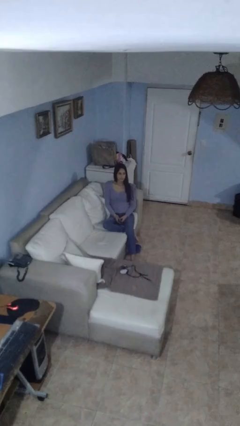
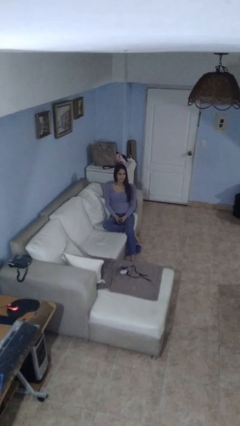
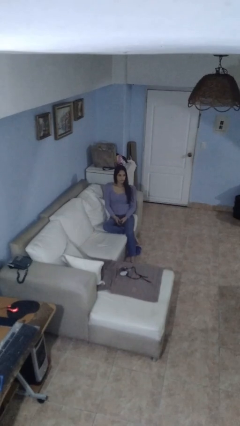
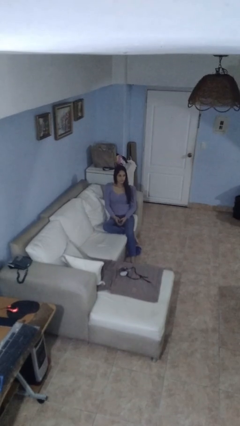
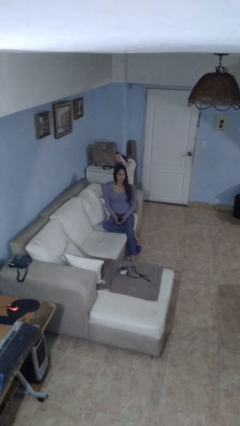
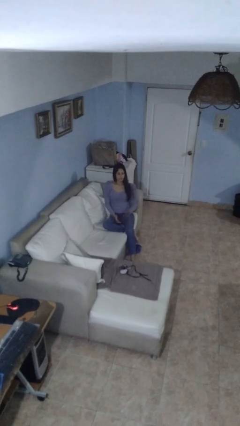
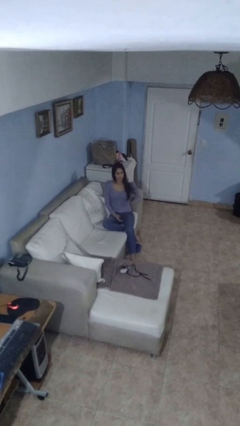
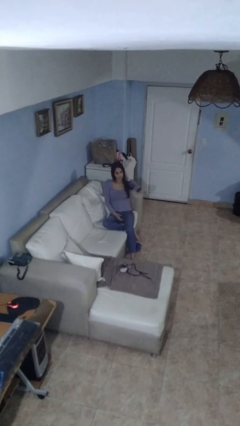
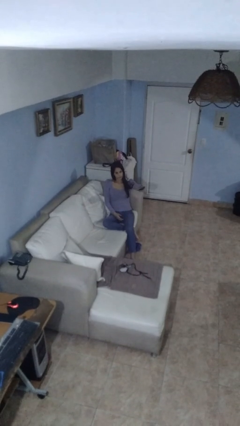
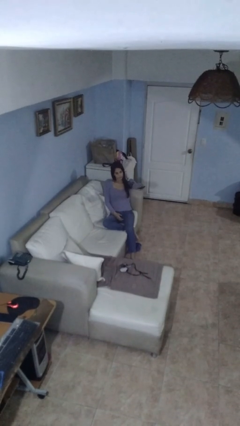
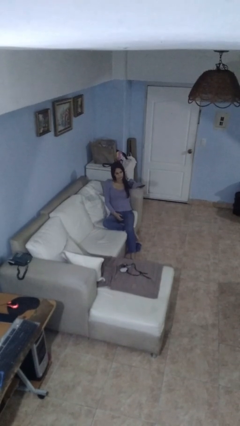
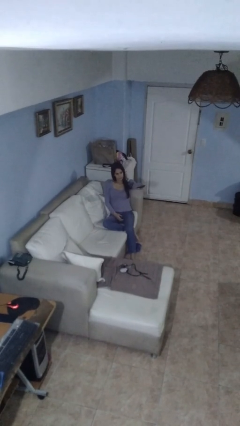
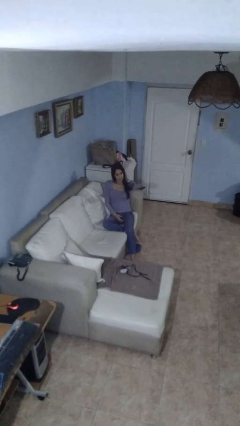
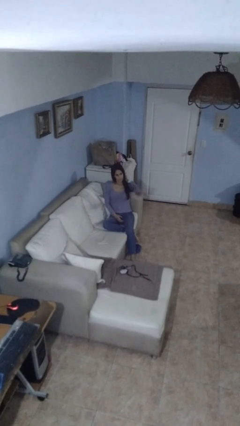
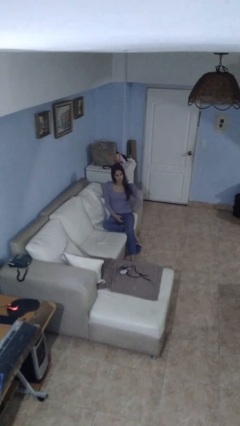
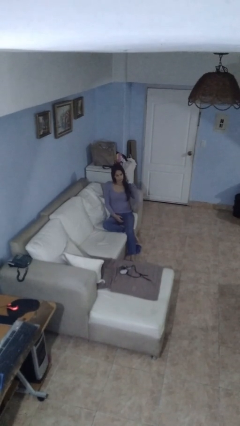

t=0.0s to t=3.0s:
person uses television remote

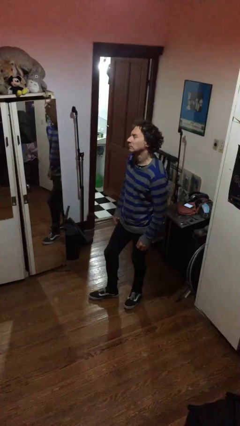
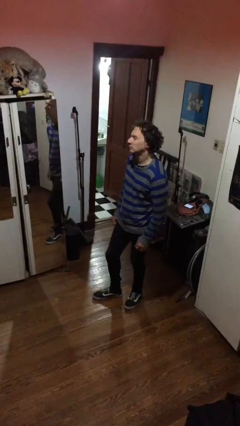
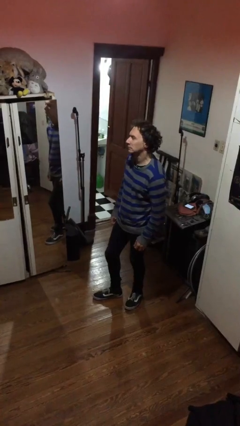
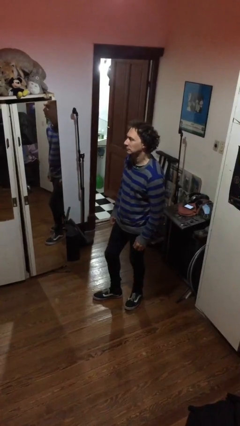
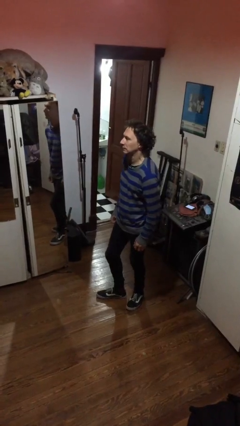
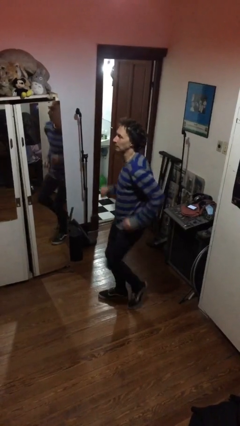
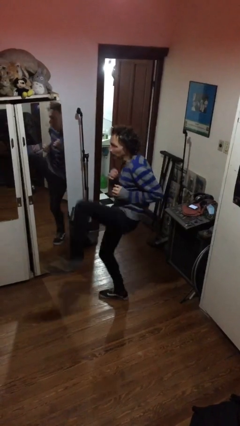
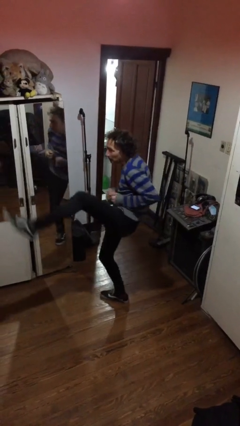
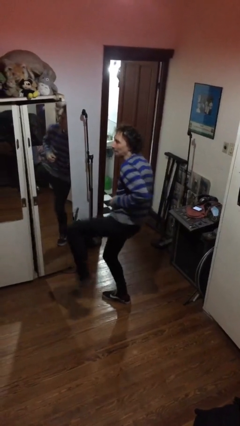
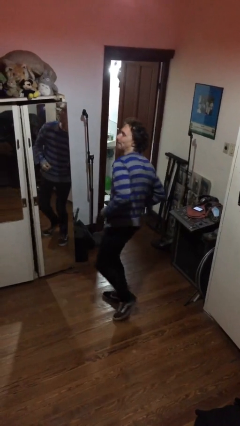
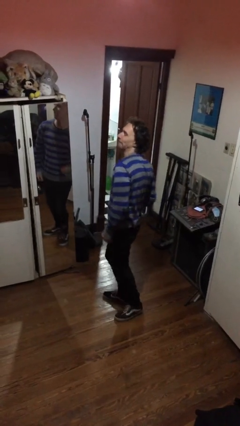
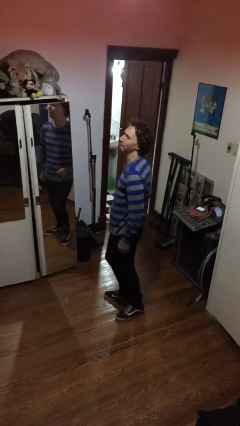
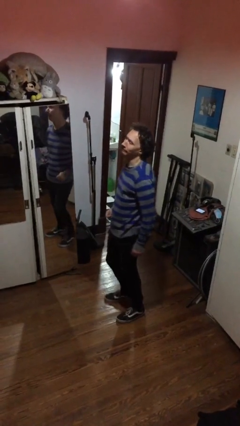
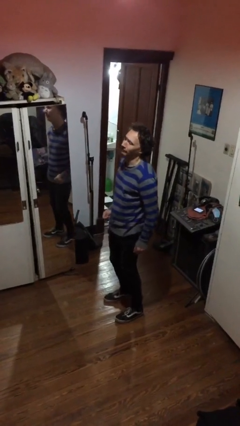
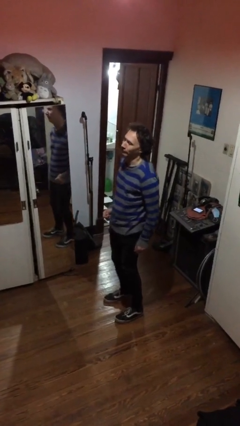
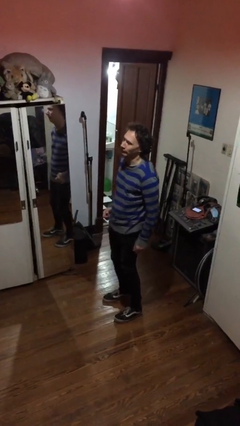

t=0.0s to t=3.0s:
person karate kicks

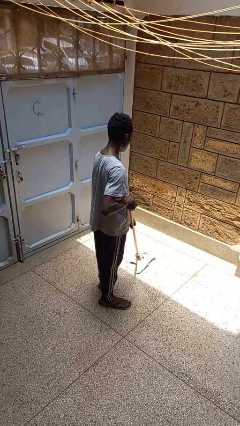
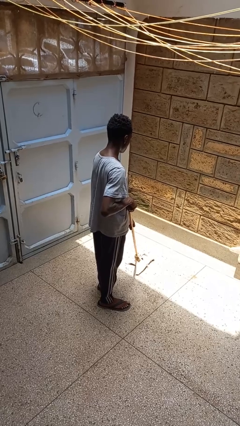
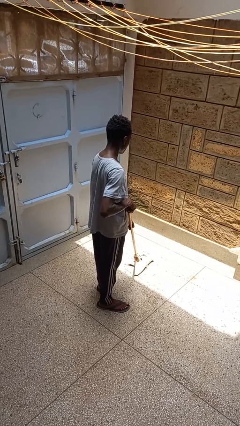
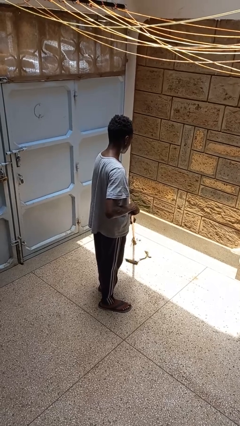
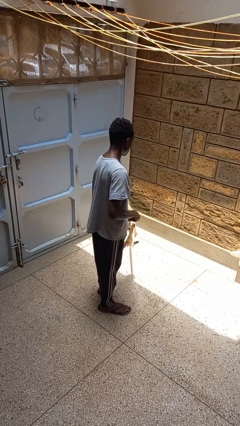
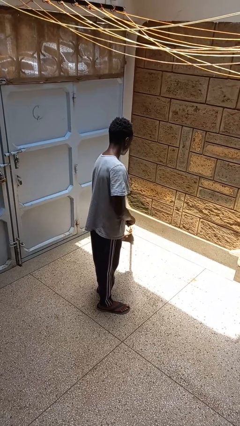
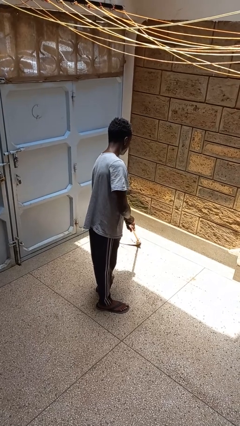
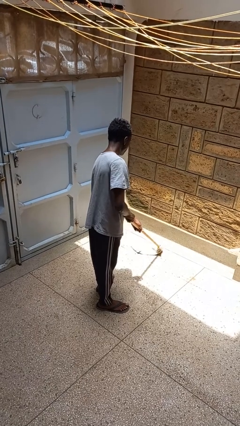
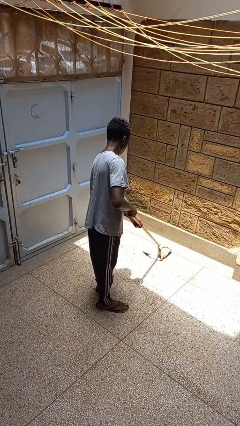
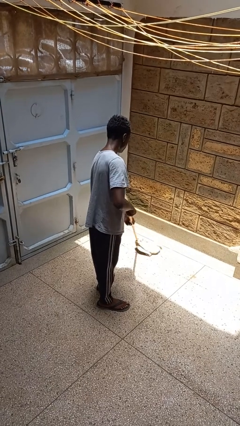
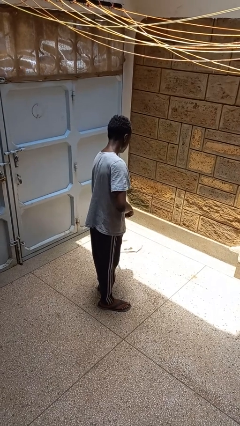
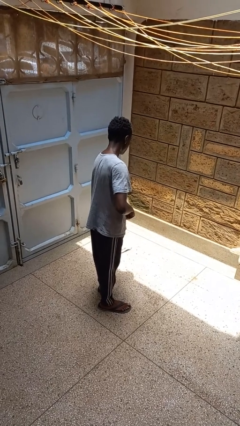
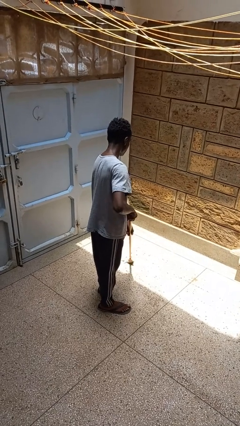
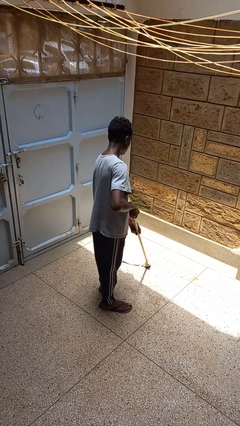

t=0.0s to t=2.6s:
person mops

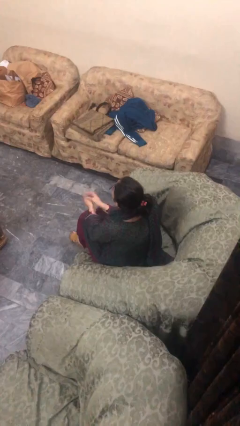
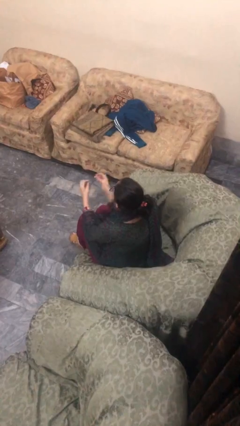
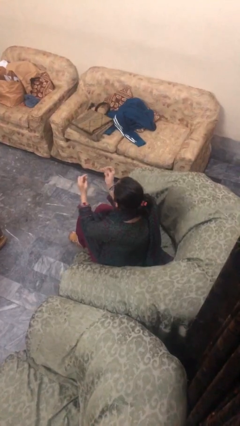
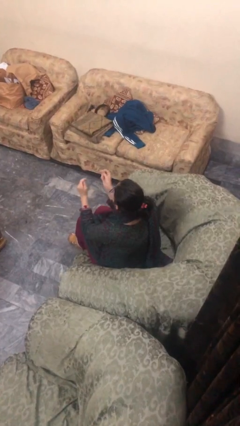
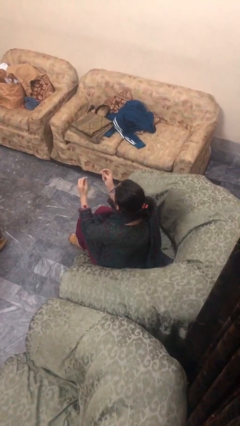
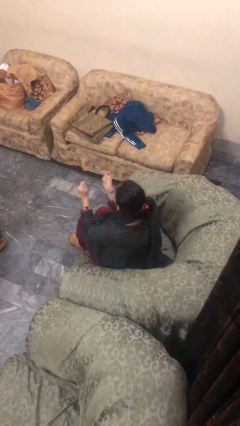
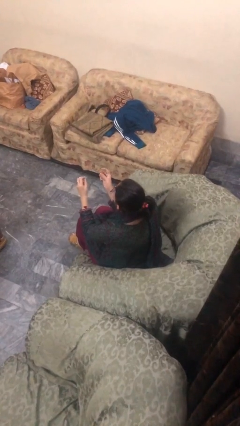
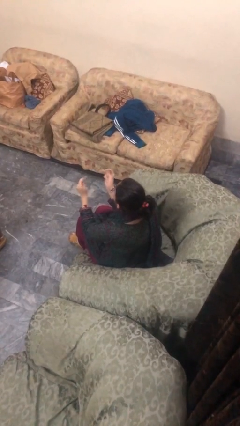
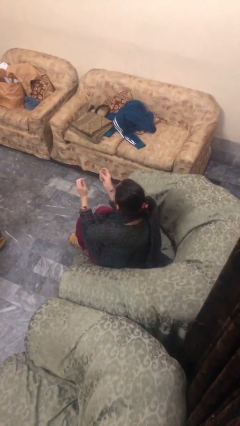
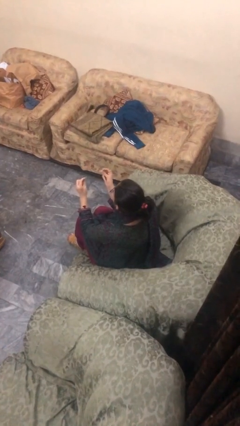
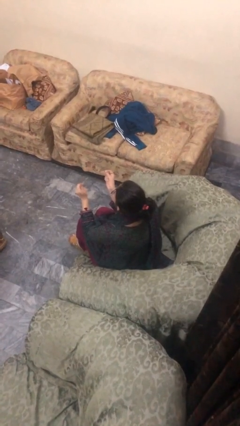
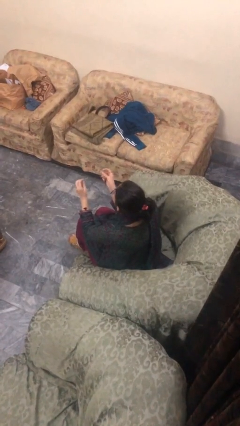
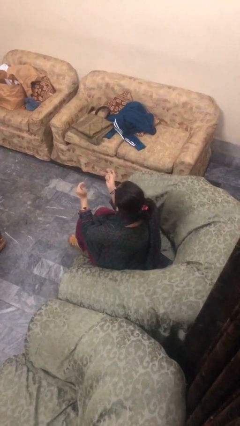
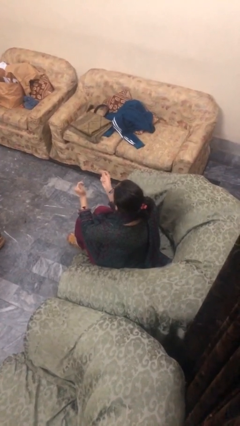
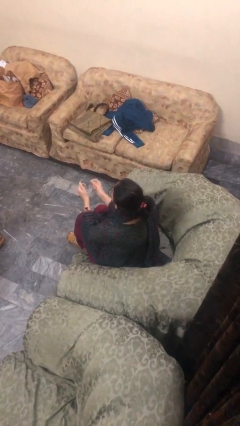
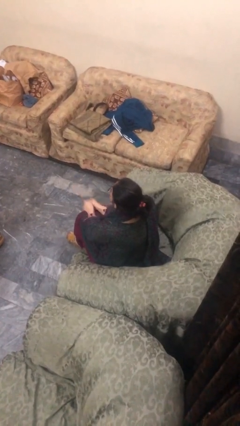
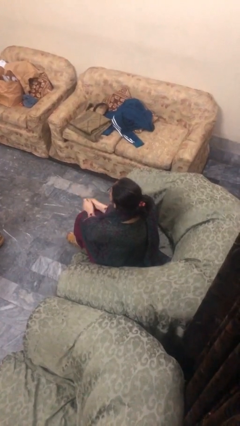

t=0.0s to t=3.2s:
person snaps fingers

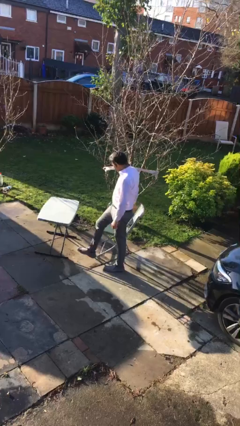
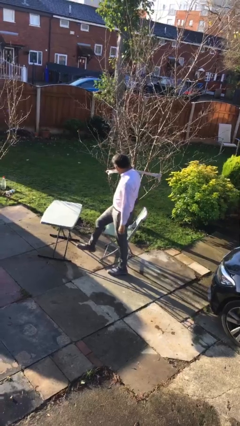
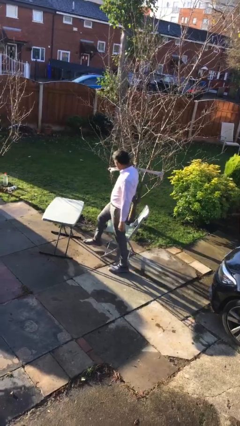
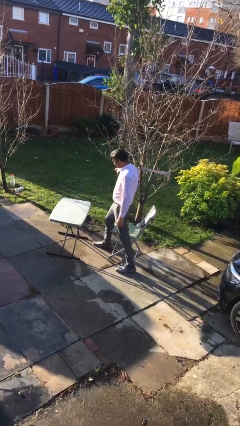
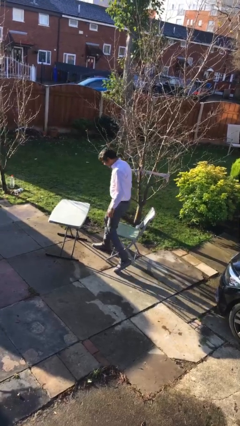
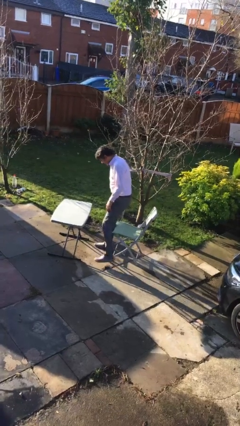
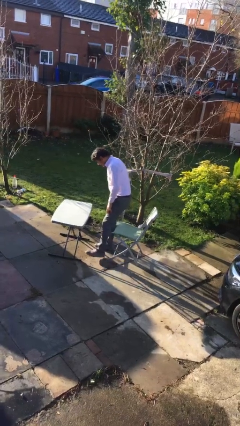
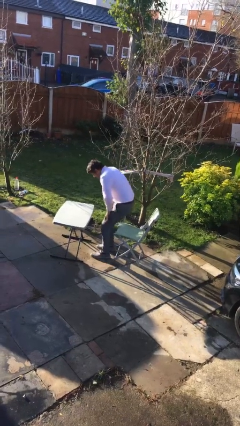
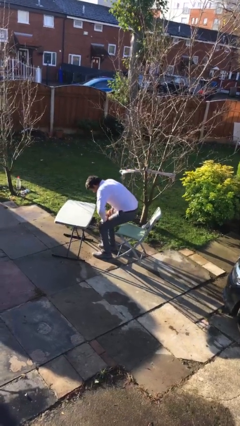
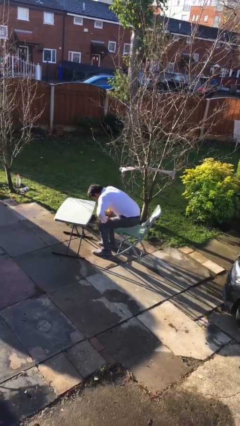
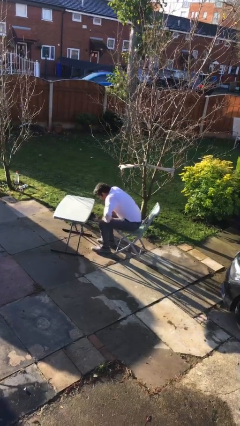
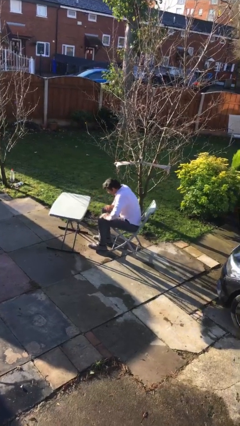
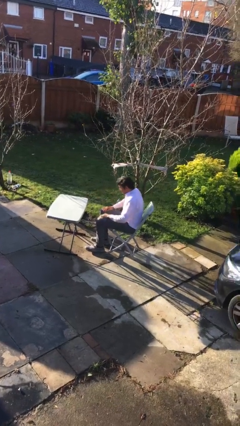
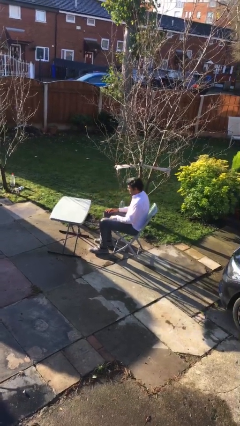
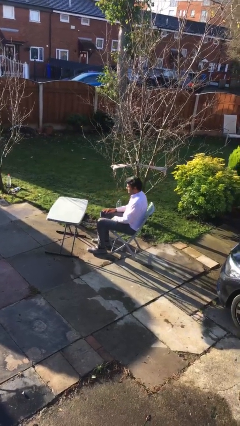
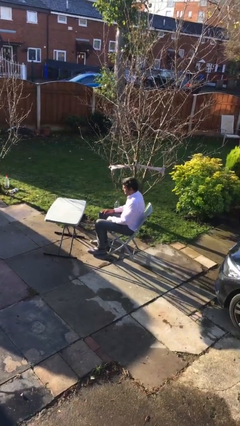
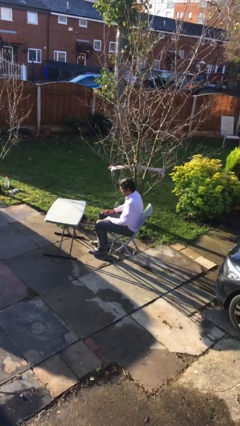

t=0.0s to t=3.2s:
person sits down

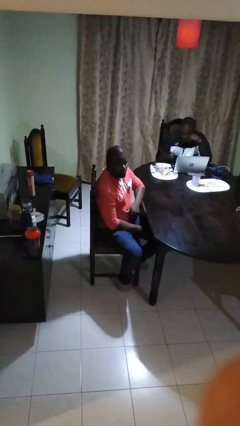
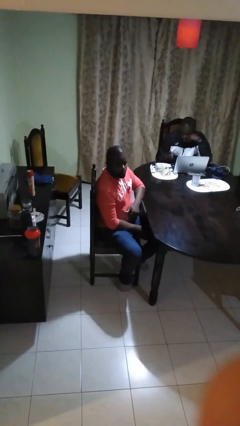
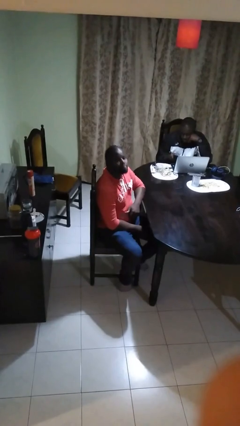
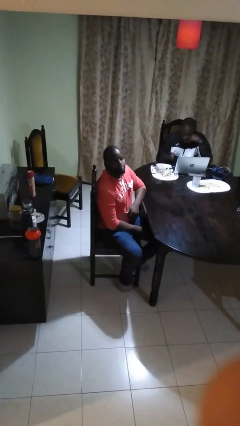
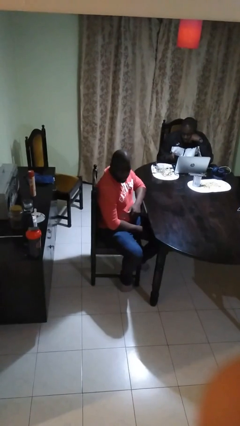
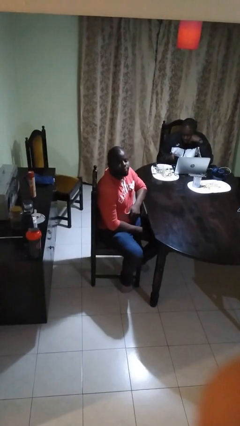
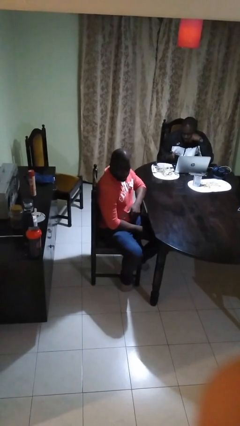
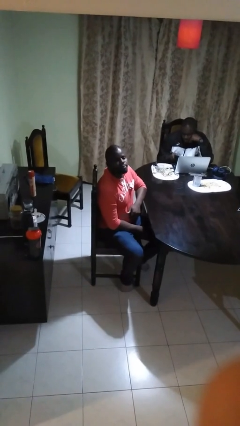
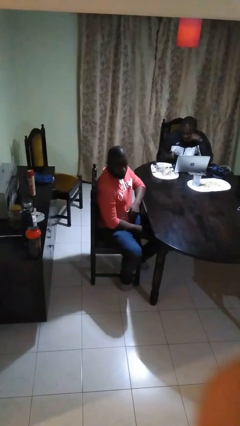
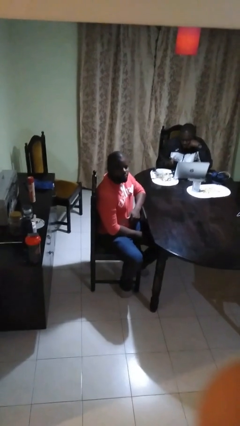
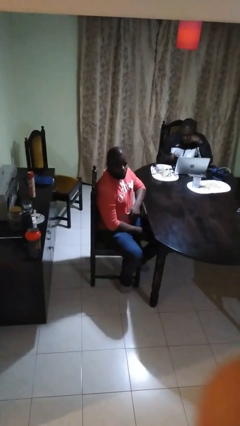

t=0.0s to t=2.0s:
person nods head

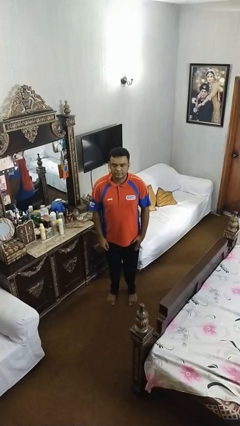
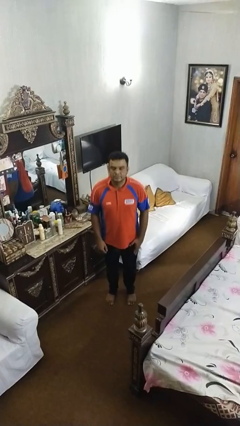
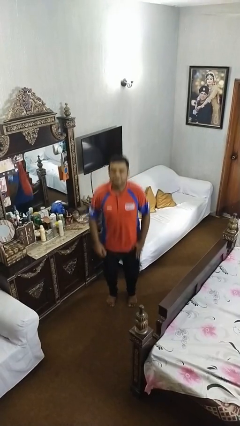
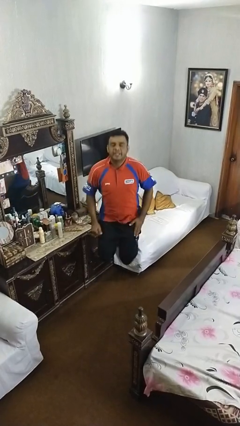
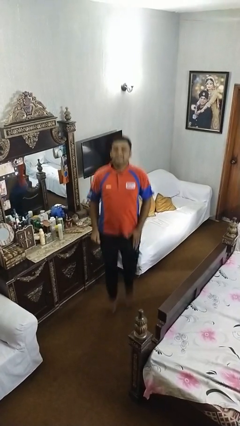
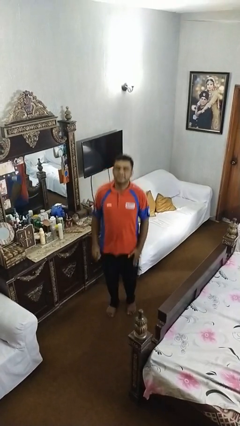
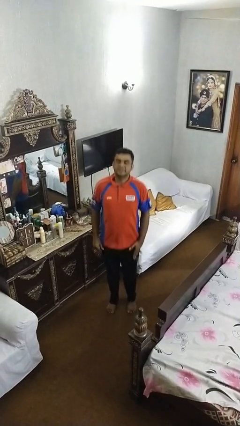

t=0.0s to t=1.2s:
person jumps
